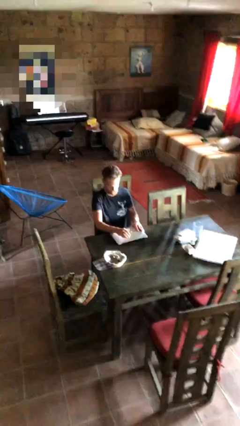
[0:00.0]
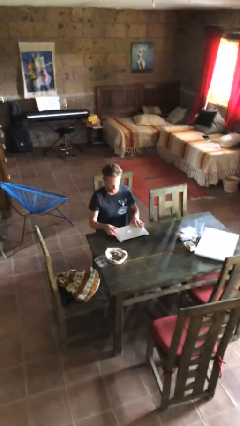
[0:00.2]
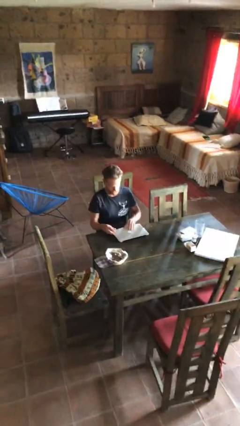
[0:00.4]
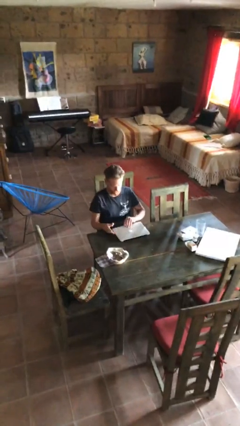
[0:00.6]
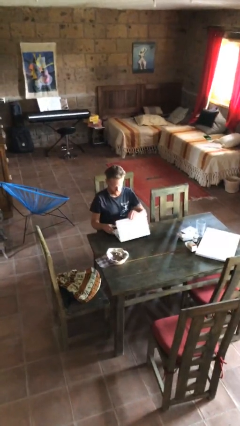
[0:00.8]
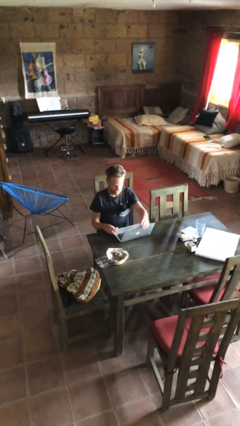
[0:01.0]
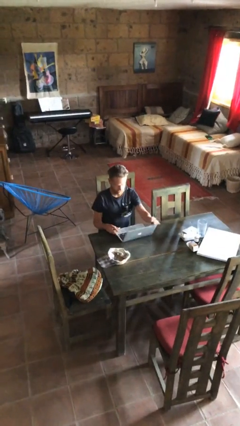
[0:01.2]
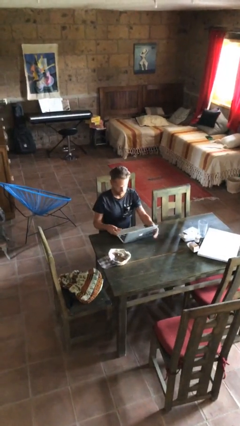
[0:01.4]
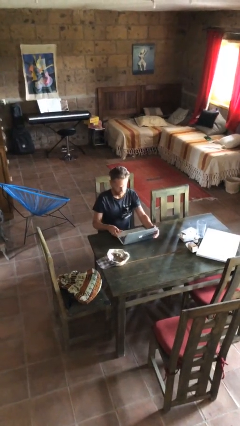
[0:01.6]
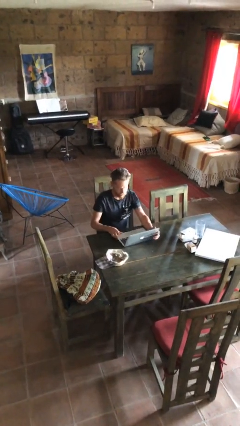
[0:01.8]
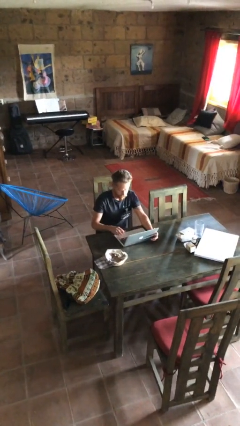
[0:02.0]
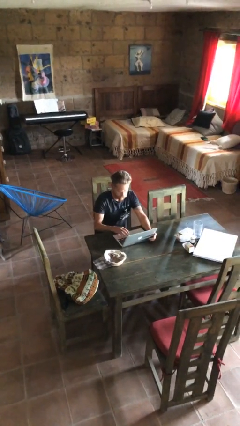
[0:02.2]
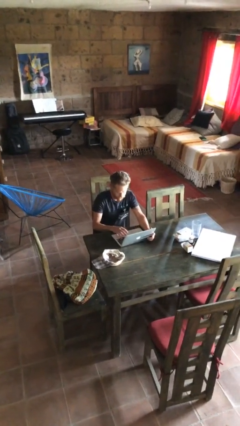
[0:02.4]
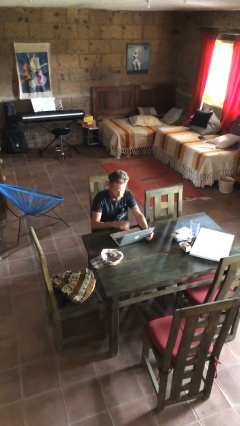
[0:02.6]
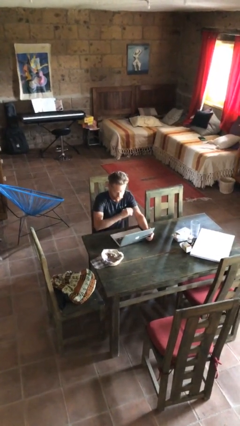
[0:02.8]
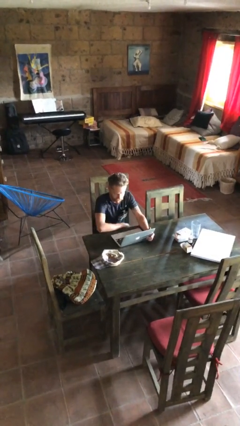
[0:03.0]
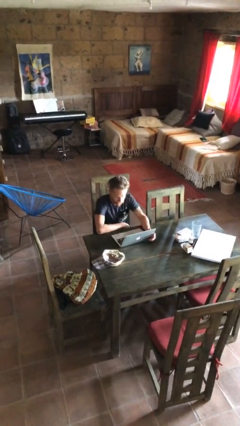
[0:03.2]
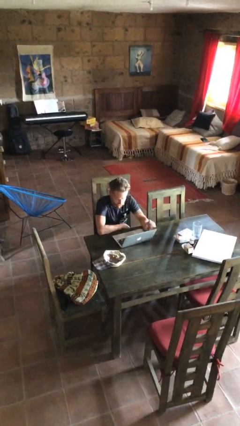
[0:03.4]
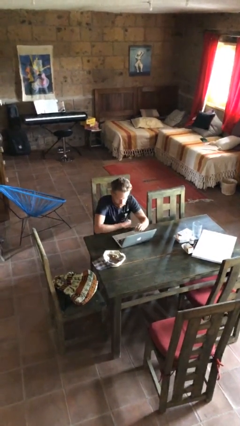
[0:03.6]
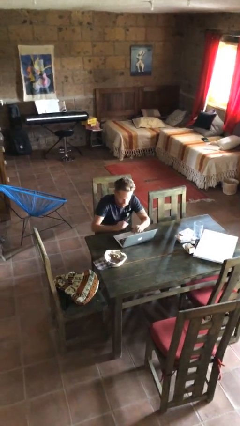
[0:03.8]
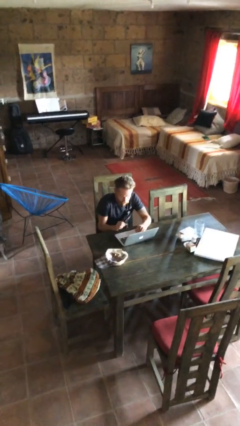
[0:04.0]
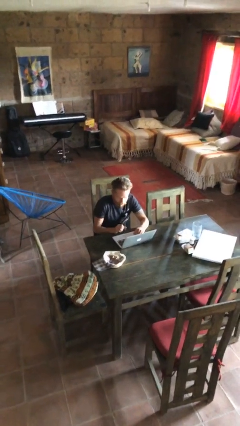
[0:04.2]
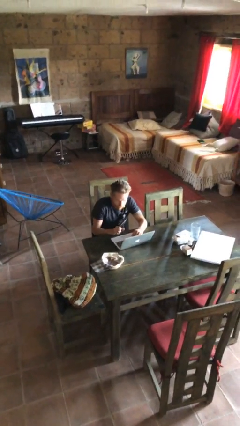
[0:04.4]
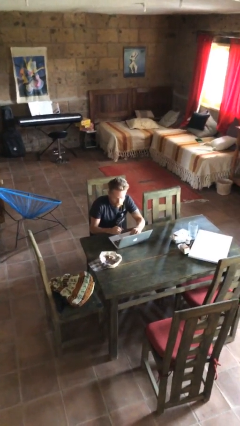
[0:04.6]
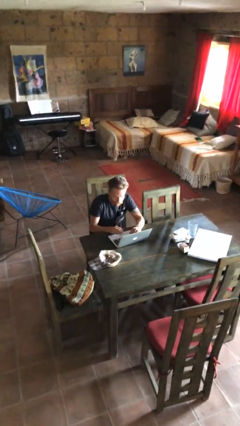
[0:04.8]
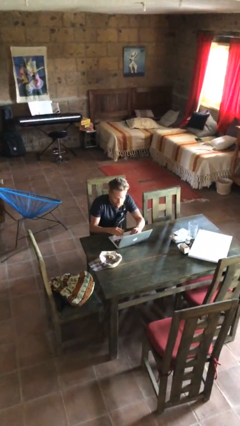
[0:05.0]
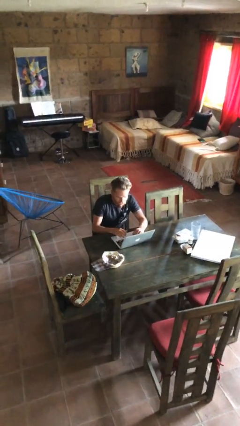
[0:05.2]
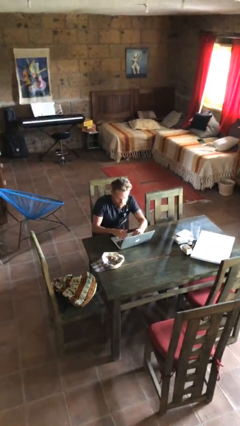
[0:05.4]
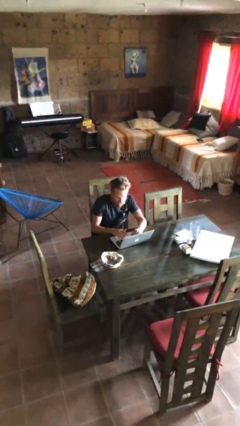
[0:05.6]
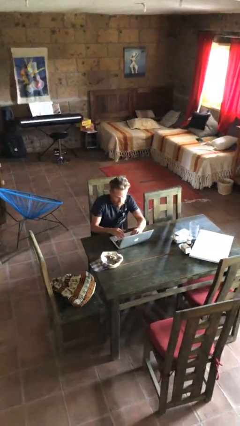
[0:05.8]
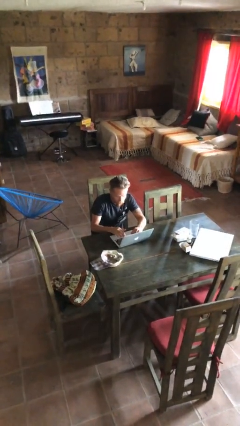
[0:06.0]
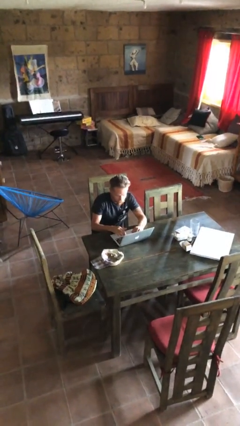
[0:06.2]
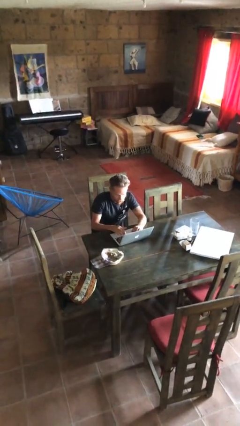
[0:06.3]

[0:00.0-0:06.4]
person interacts with laptop

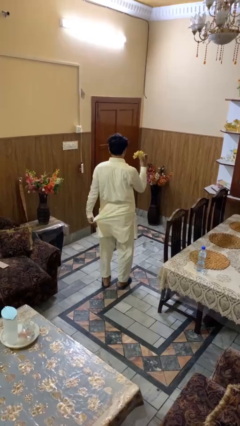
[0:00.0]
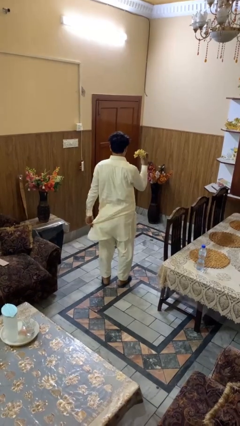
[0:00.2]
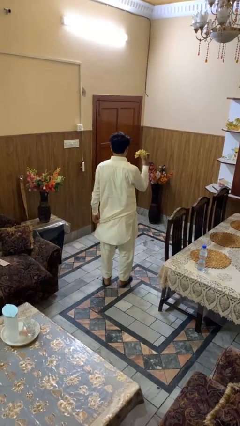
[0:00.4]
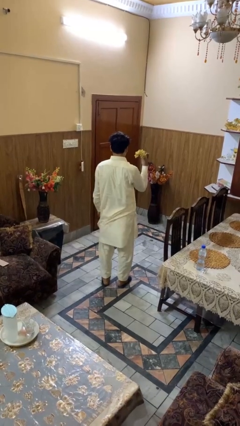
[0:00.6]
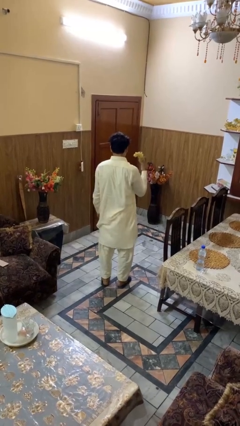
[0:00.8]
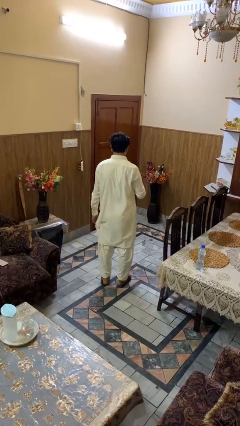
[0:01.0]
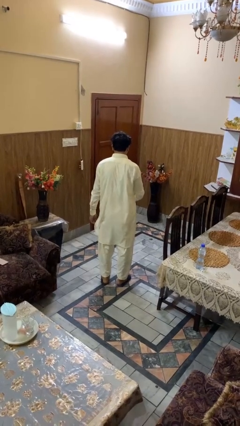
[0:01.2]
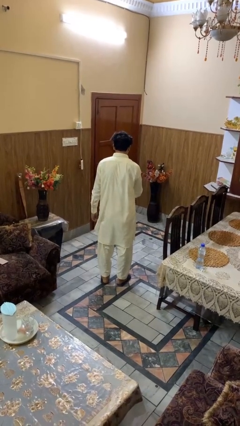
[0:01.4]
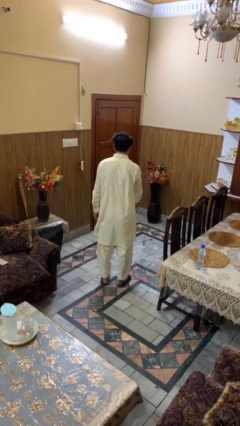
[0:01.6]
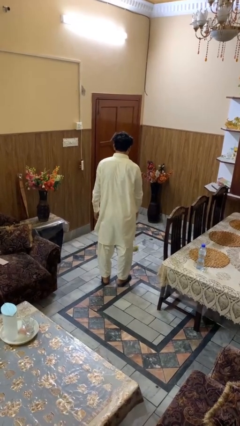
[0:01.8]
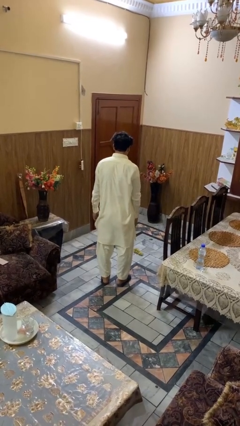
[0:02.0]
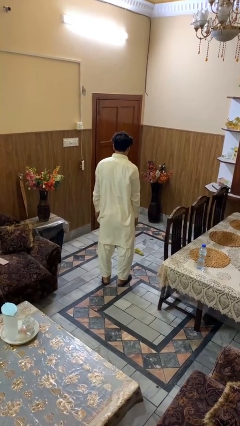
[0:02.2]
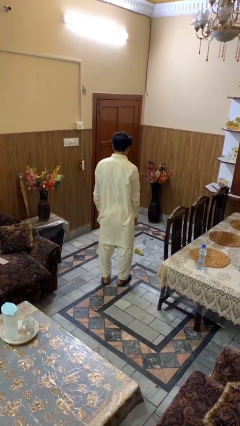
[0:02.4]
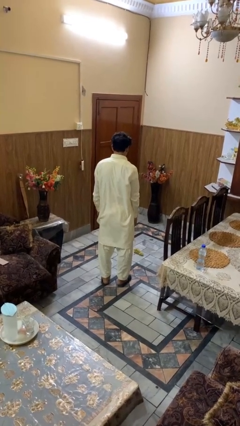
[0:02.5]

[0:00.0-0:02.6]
person throws object to ground

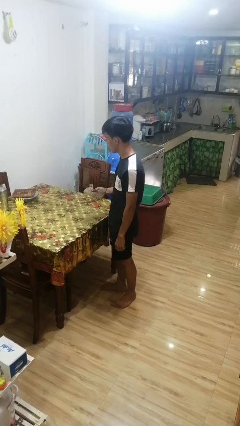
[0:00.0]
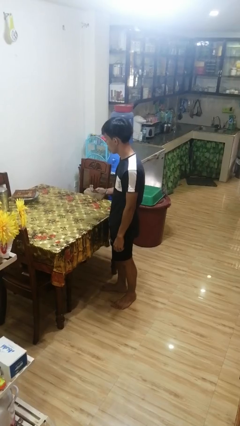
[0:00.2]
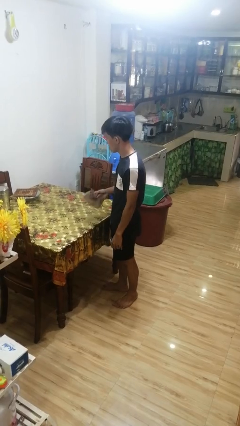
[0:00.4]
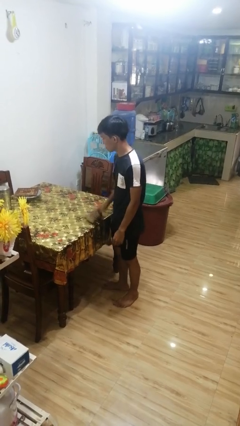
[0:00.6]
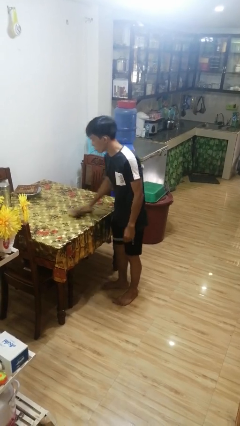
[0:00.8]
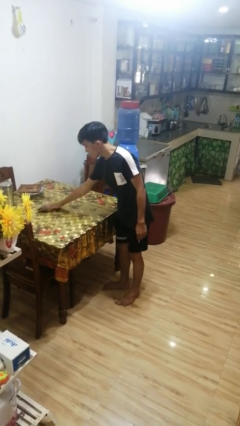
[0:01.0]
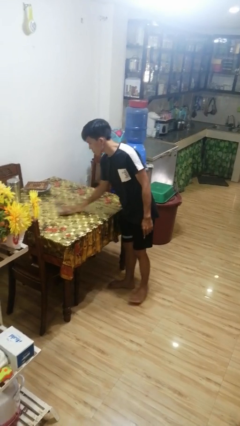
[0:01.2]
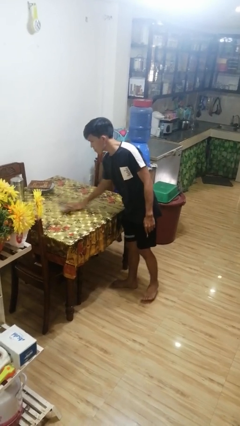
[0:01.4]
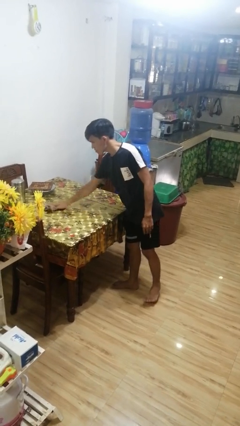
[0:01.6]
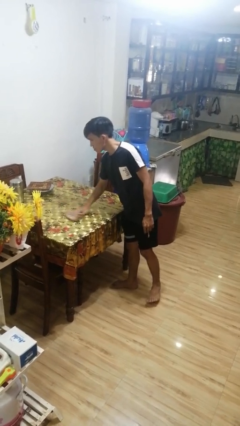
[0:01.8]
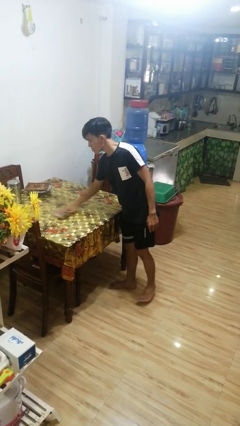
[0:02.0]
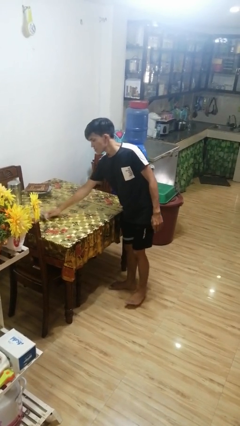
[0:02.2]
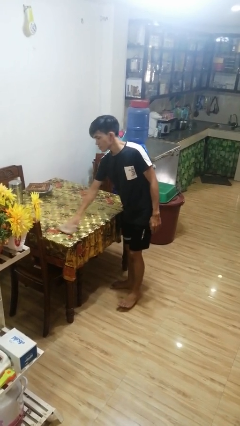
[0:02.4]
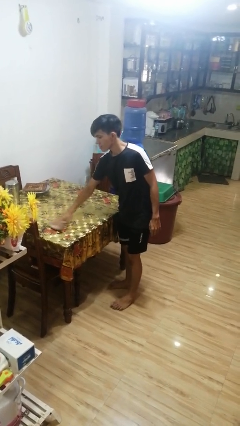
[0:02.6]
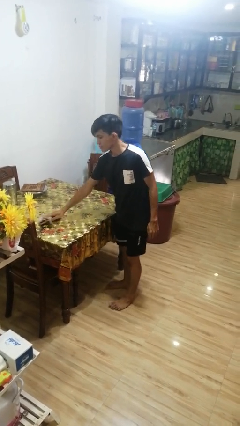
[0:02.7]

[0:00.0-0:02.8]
person cleans table with rag

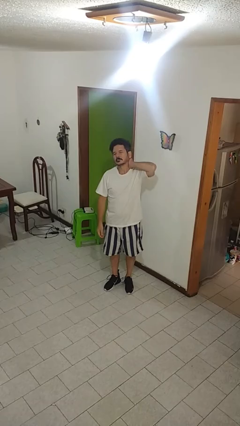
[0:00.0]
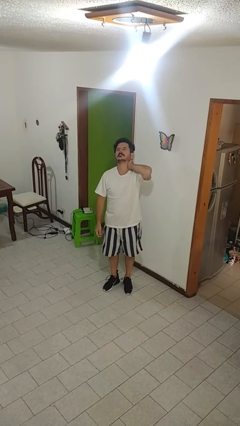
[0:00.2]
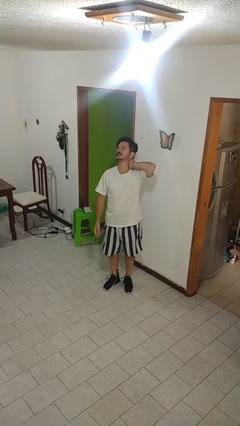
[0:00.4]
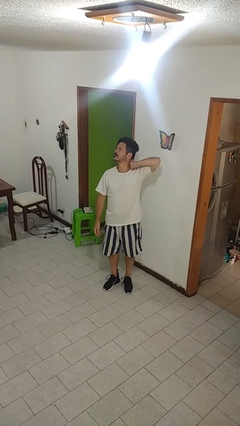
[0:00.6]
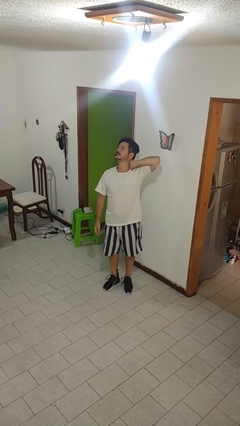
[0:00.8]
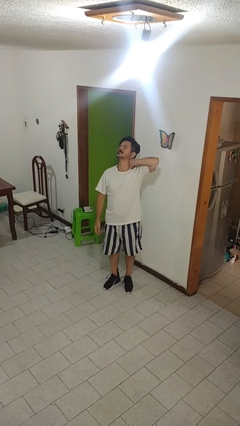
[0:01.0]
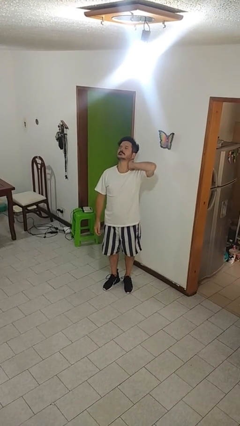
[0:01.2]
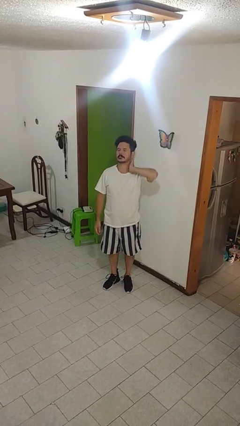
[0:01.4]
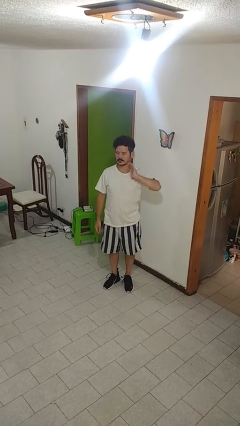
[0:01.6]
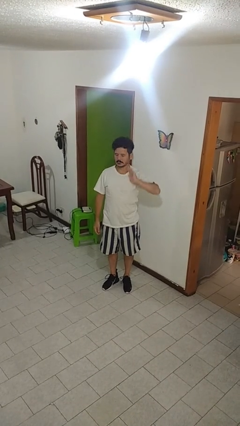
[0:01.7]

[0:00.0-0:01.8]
person rubs neck

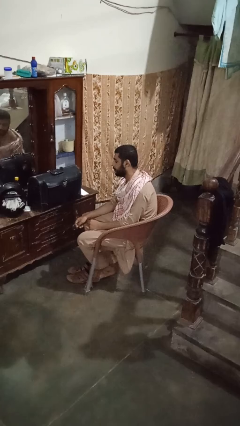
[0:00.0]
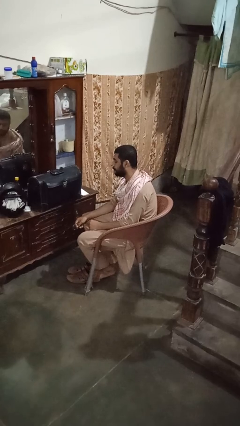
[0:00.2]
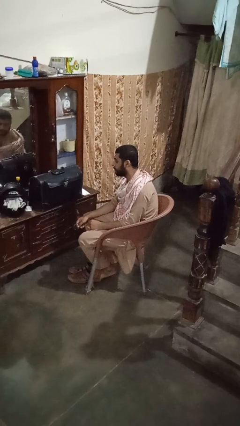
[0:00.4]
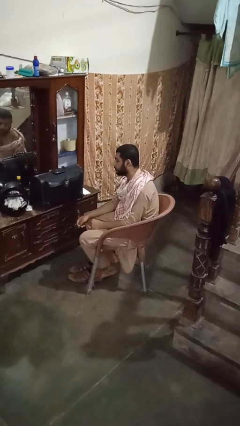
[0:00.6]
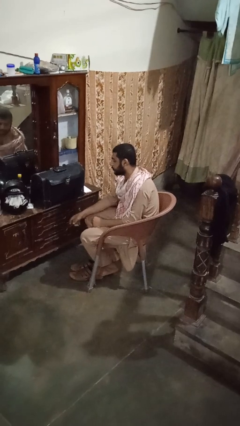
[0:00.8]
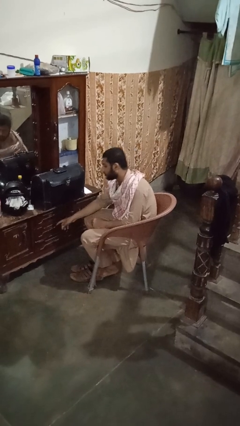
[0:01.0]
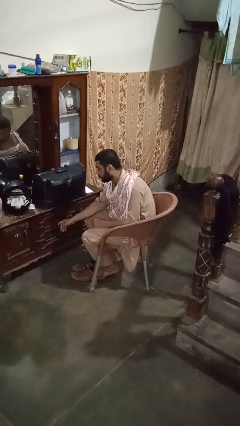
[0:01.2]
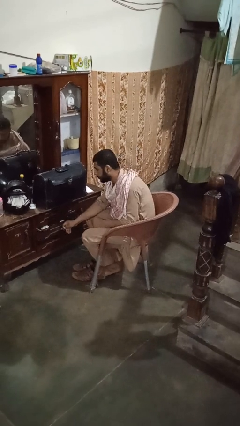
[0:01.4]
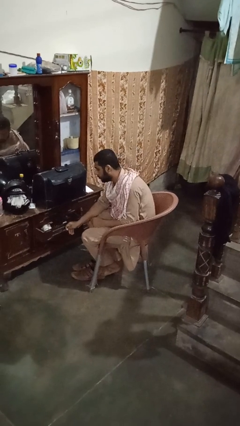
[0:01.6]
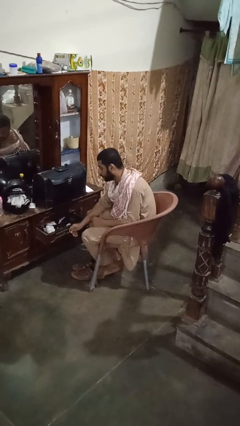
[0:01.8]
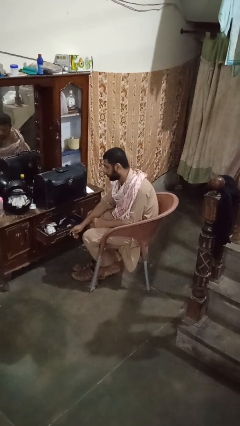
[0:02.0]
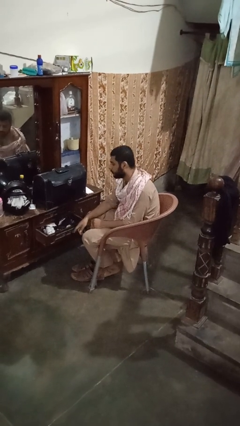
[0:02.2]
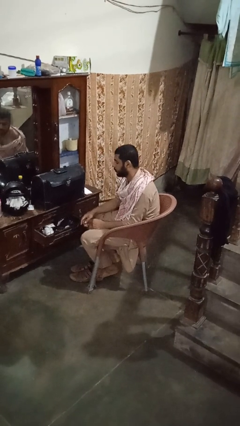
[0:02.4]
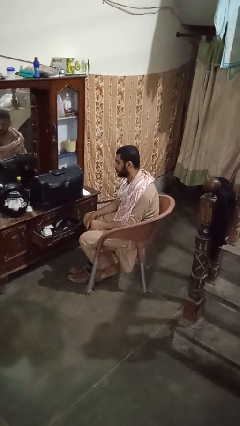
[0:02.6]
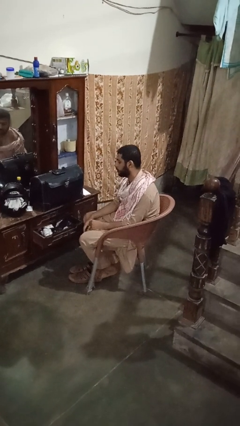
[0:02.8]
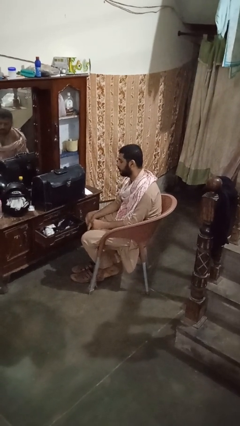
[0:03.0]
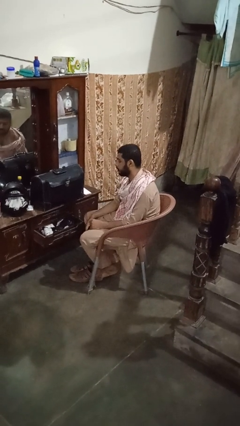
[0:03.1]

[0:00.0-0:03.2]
person opens dresser drawer

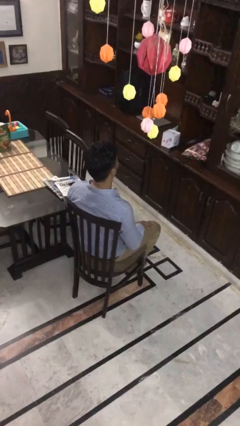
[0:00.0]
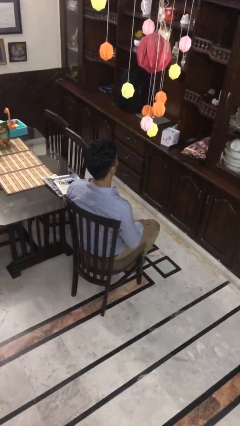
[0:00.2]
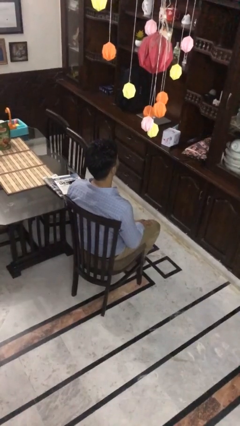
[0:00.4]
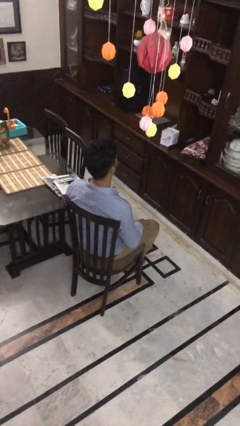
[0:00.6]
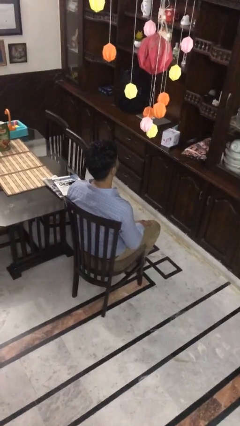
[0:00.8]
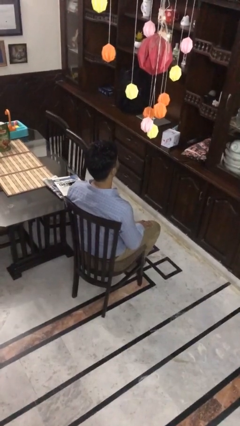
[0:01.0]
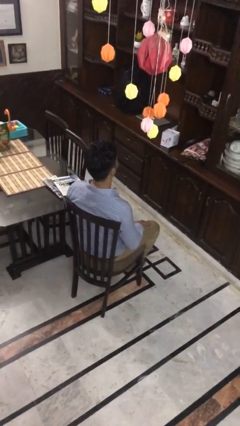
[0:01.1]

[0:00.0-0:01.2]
person looks at hands in lap
